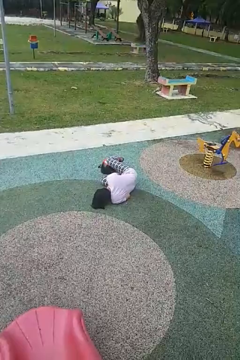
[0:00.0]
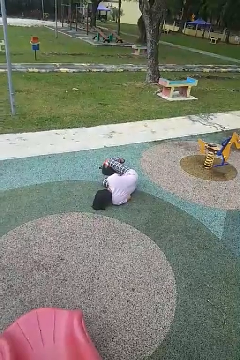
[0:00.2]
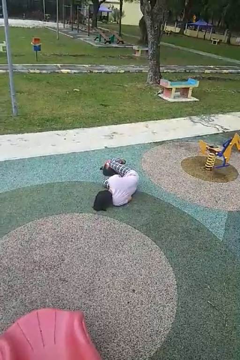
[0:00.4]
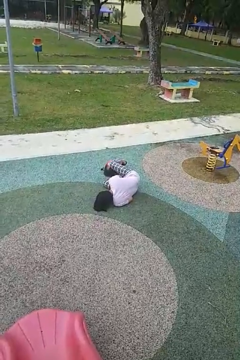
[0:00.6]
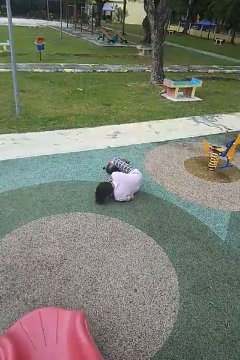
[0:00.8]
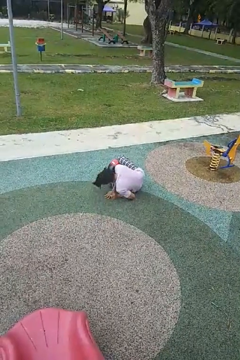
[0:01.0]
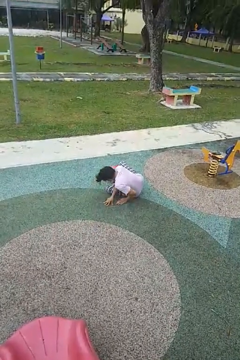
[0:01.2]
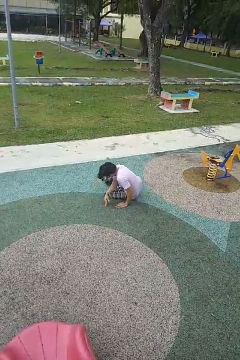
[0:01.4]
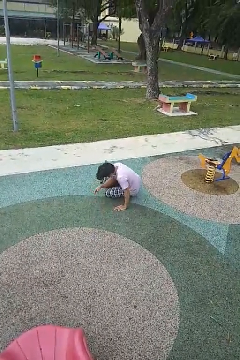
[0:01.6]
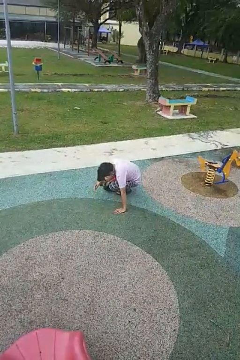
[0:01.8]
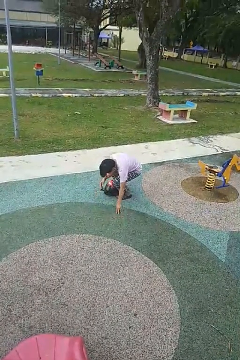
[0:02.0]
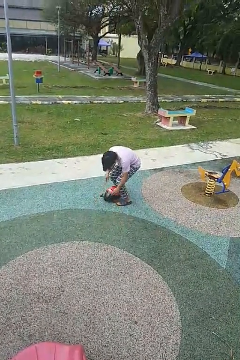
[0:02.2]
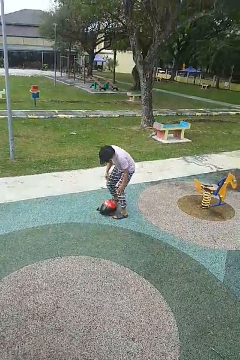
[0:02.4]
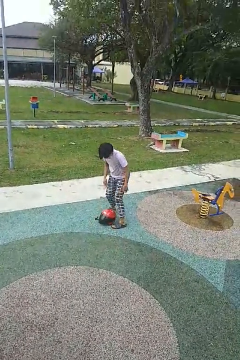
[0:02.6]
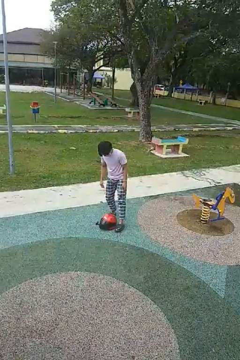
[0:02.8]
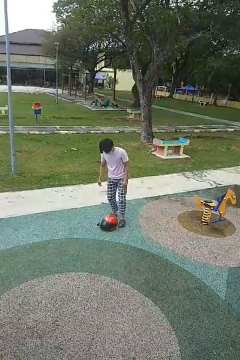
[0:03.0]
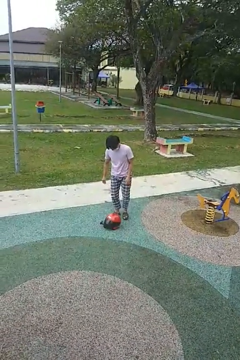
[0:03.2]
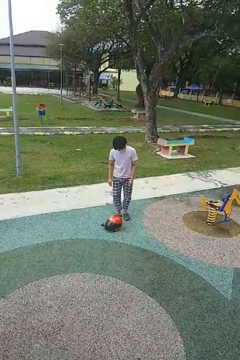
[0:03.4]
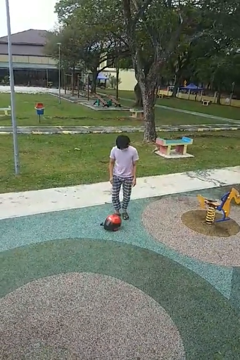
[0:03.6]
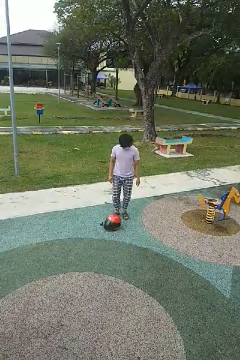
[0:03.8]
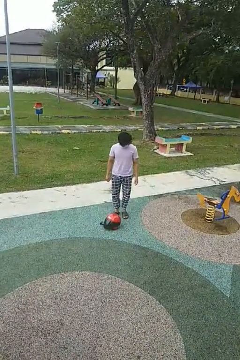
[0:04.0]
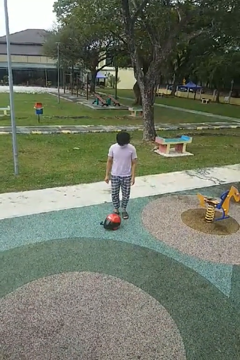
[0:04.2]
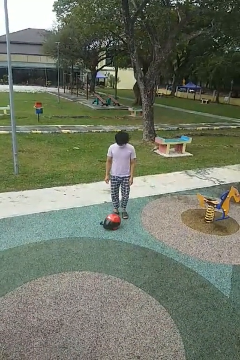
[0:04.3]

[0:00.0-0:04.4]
person stands up from floor

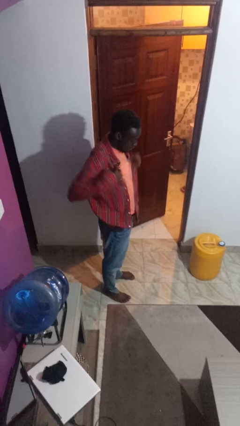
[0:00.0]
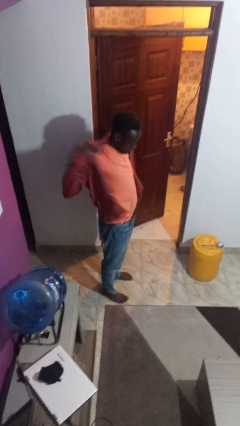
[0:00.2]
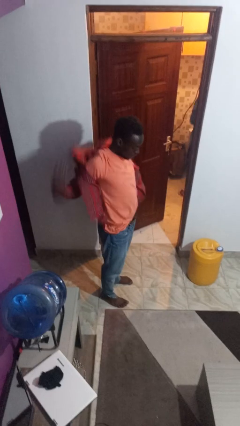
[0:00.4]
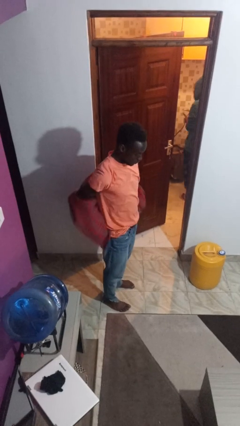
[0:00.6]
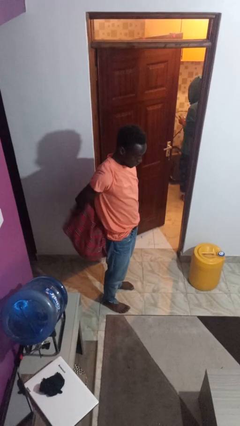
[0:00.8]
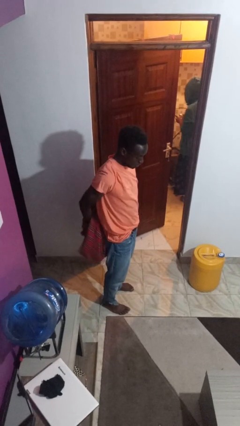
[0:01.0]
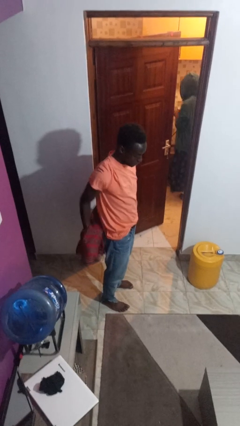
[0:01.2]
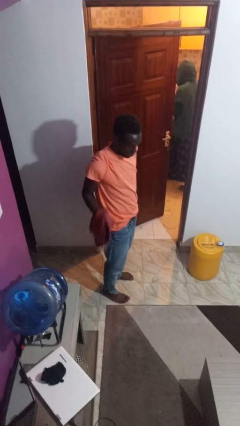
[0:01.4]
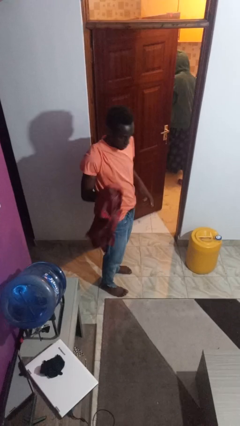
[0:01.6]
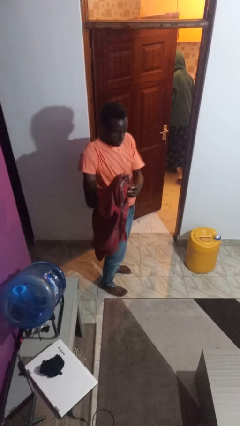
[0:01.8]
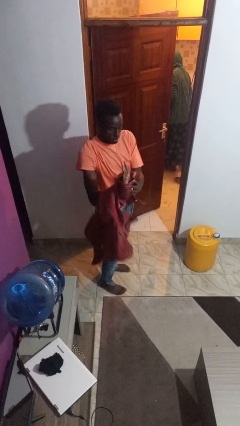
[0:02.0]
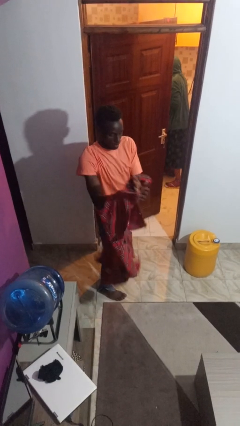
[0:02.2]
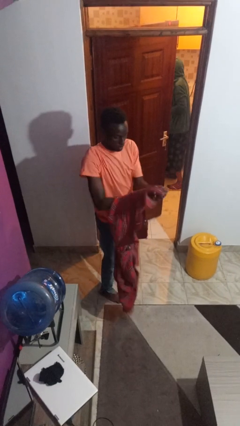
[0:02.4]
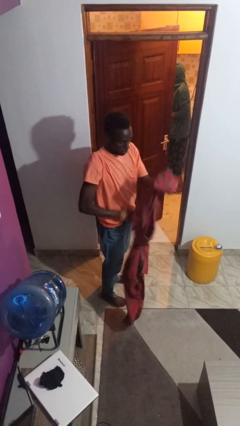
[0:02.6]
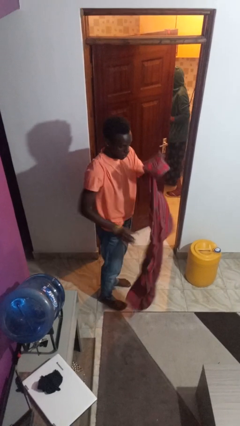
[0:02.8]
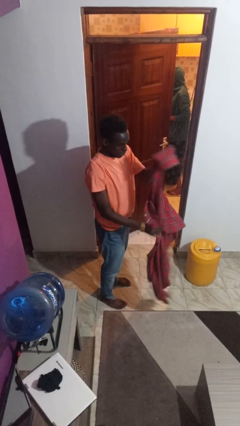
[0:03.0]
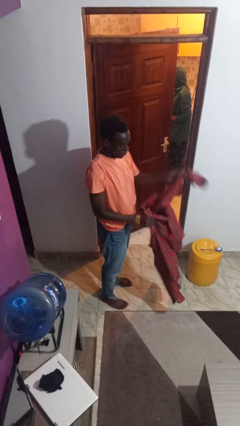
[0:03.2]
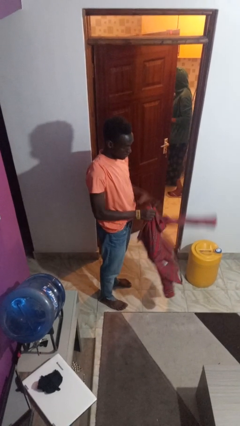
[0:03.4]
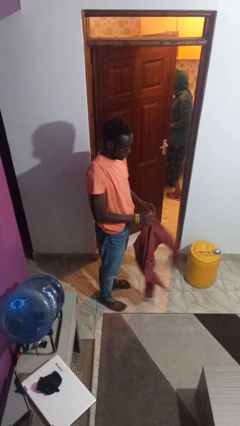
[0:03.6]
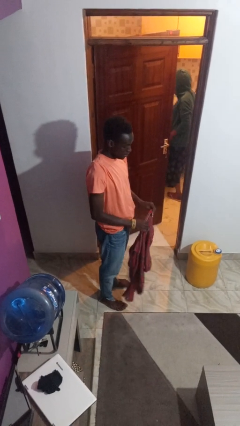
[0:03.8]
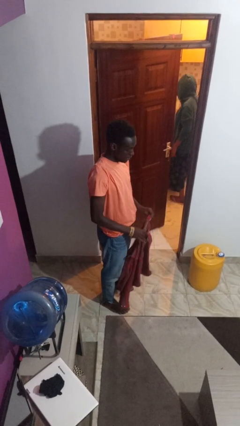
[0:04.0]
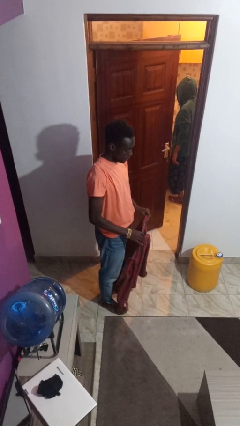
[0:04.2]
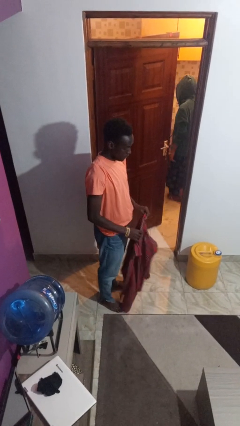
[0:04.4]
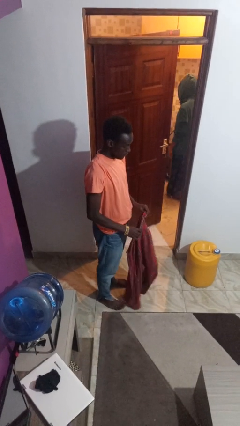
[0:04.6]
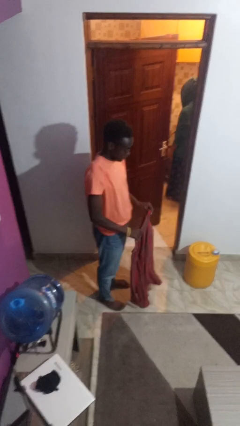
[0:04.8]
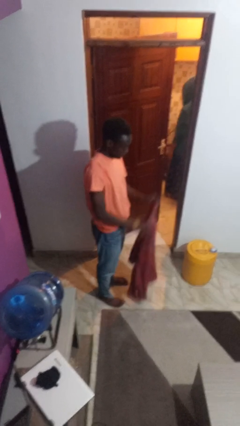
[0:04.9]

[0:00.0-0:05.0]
person takes off shirt

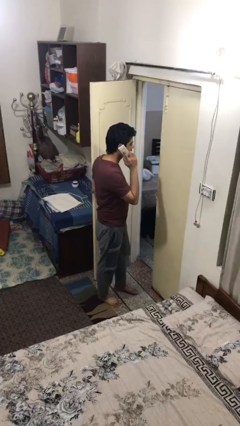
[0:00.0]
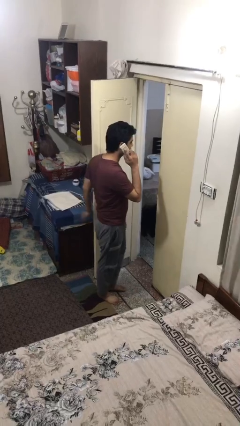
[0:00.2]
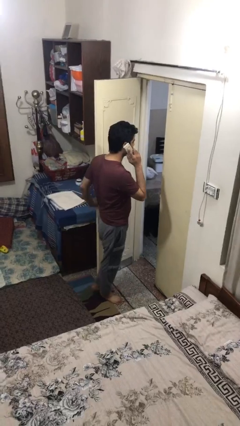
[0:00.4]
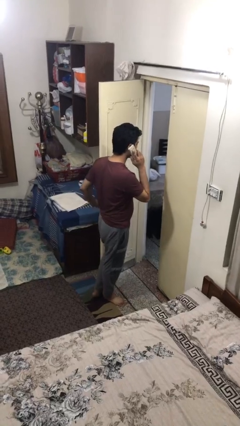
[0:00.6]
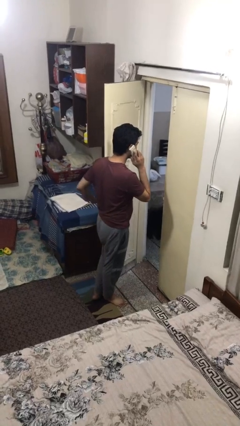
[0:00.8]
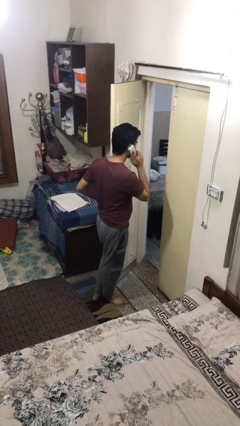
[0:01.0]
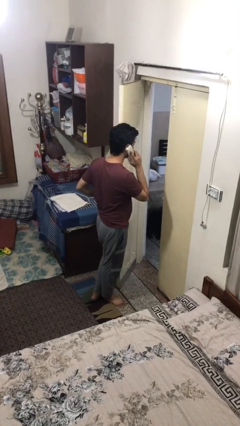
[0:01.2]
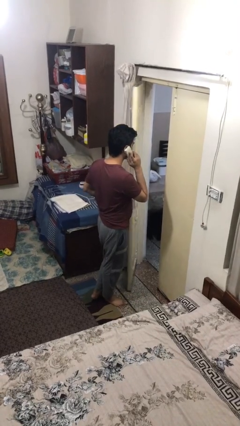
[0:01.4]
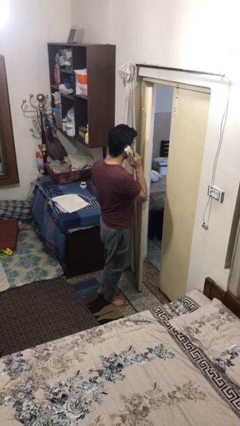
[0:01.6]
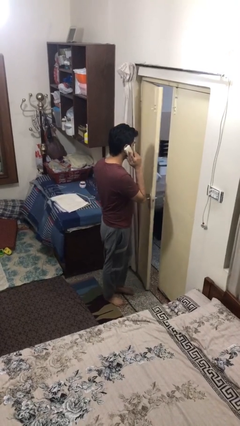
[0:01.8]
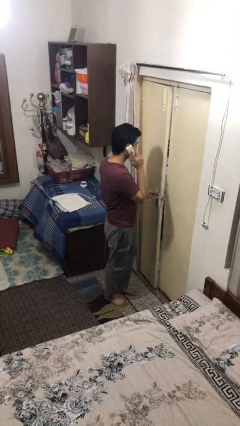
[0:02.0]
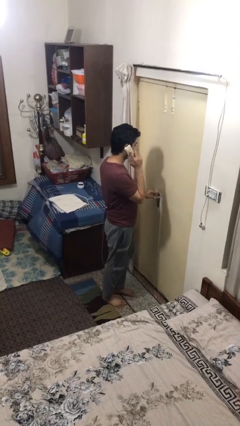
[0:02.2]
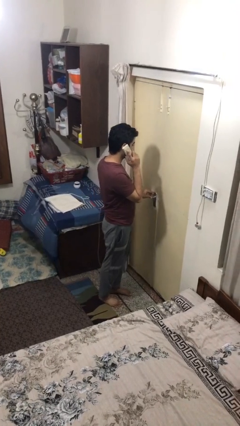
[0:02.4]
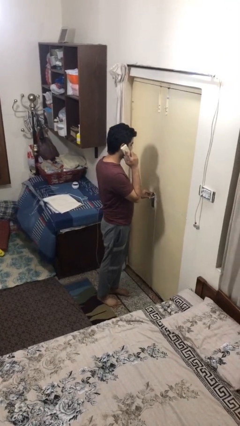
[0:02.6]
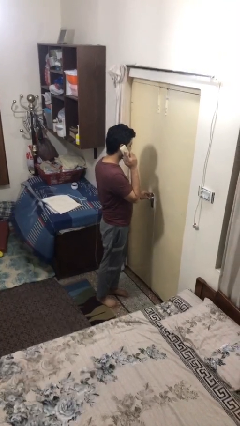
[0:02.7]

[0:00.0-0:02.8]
person closes facility door

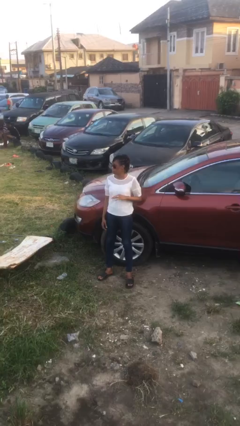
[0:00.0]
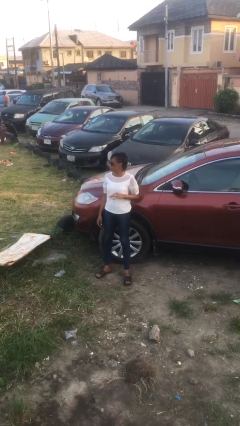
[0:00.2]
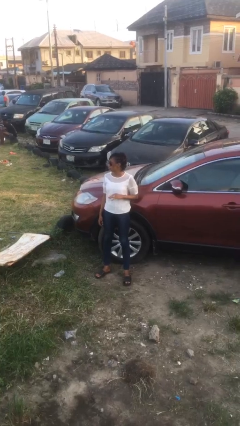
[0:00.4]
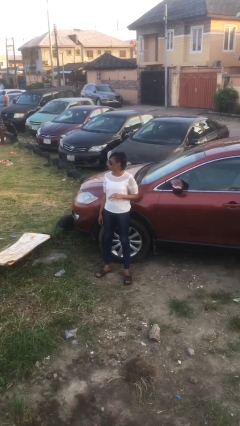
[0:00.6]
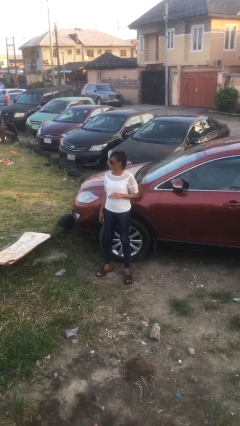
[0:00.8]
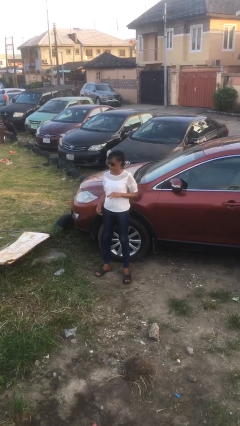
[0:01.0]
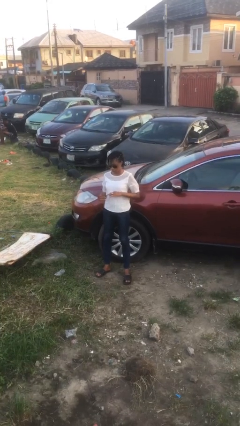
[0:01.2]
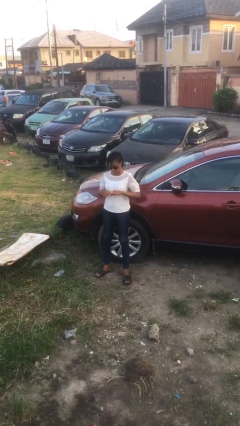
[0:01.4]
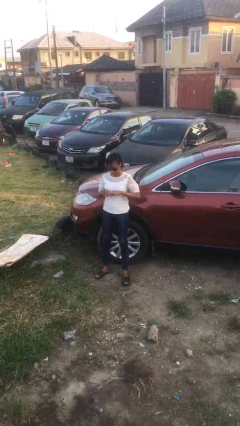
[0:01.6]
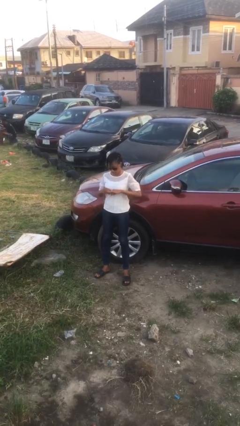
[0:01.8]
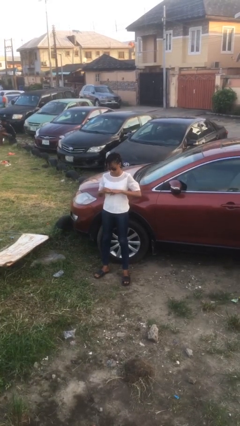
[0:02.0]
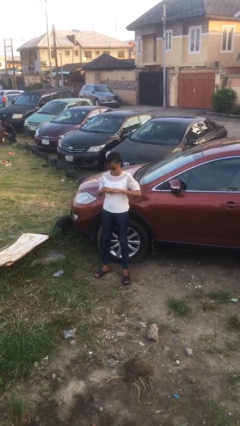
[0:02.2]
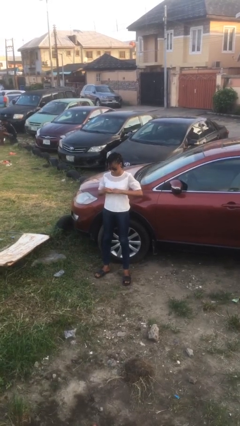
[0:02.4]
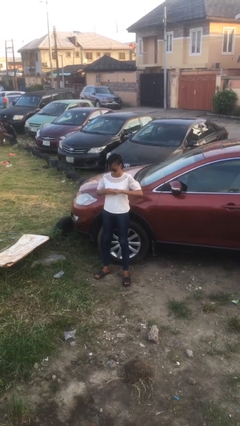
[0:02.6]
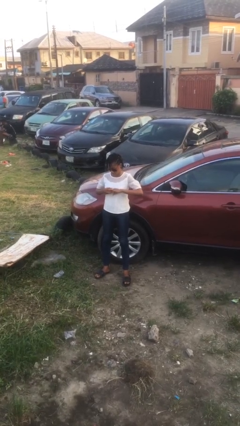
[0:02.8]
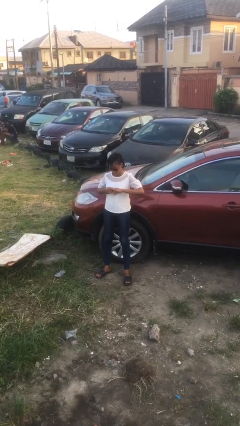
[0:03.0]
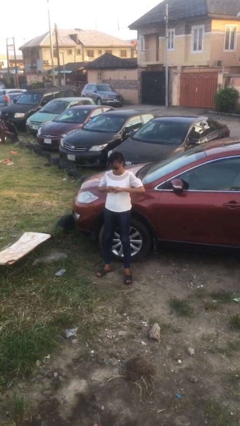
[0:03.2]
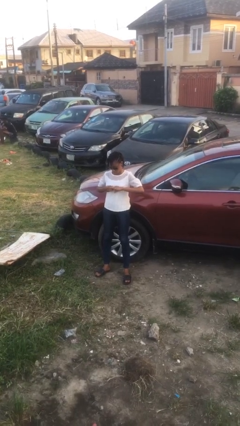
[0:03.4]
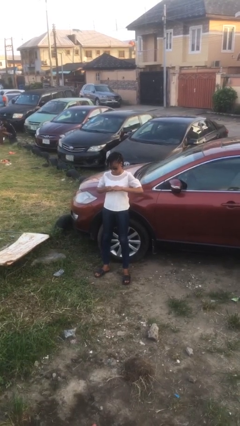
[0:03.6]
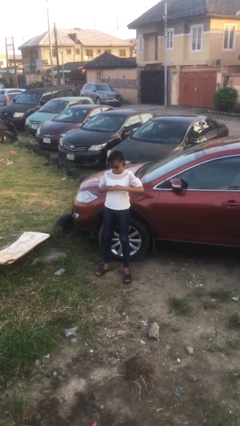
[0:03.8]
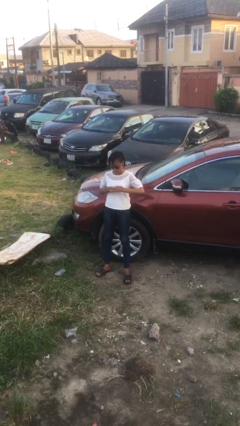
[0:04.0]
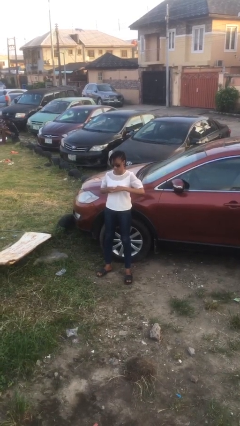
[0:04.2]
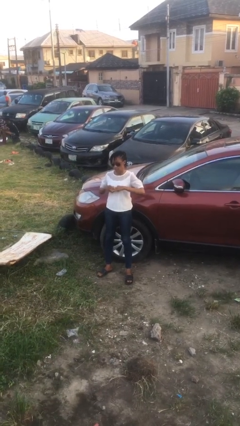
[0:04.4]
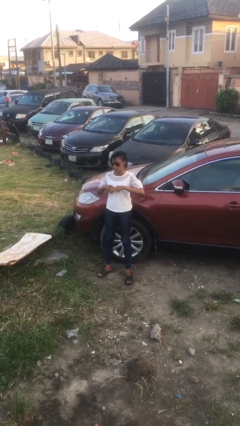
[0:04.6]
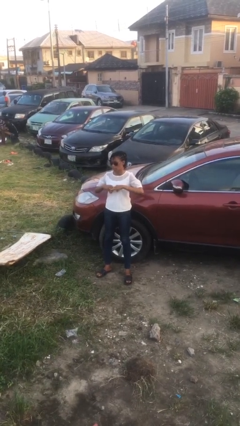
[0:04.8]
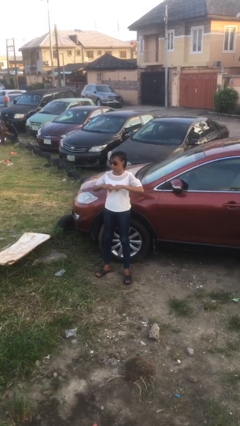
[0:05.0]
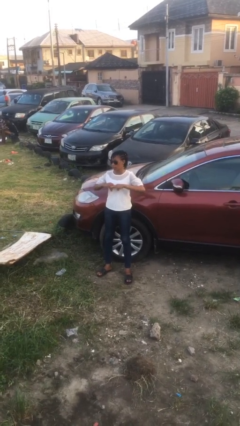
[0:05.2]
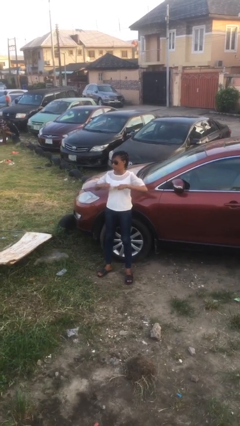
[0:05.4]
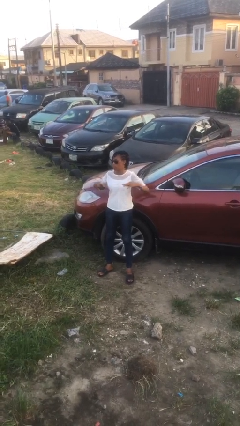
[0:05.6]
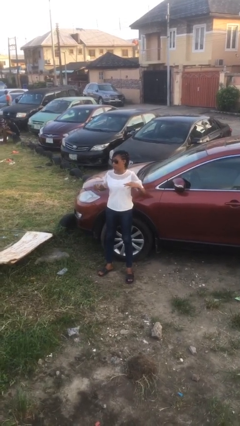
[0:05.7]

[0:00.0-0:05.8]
person takes off ring

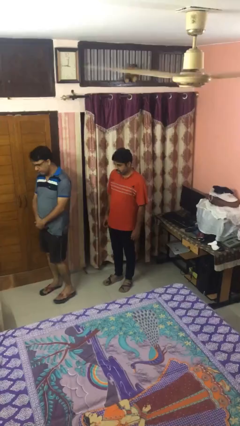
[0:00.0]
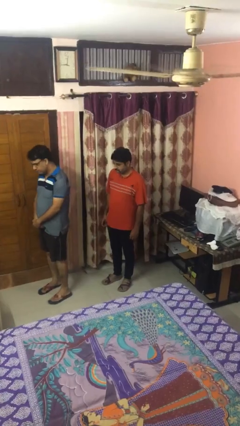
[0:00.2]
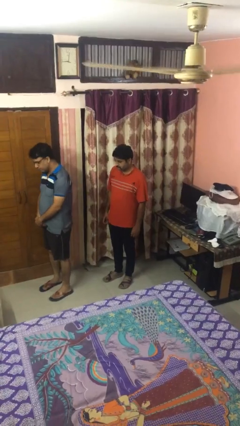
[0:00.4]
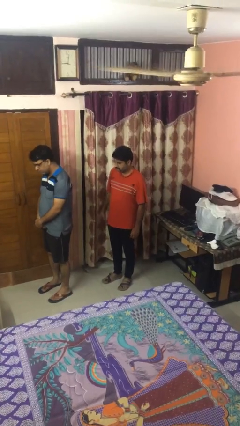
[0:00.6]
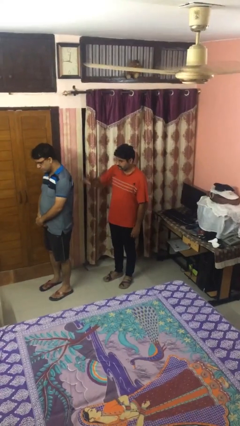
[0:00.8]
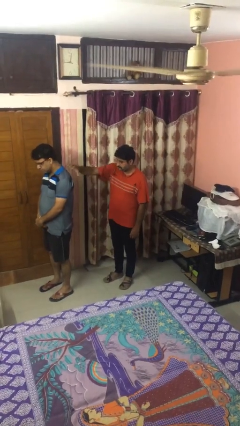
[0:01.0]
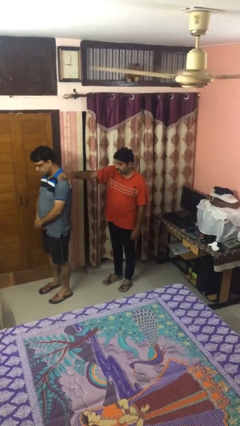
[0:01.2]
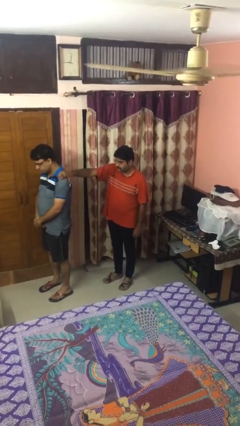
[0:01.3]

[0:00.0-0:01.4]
person grabs person by shoulder
